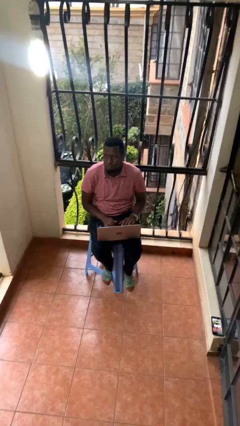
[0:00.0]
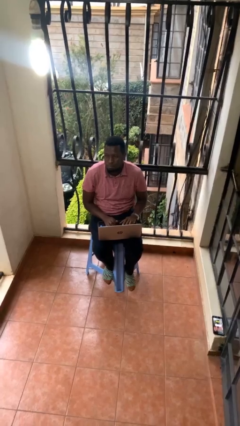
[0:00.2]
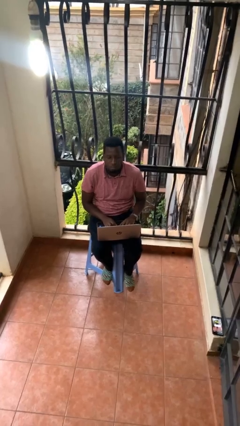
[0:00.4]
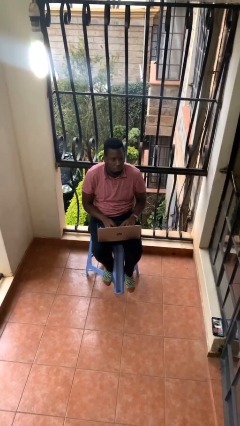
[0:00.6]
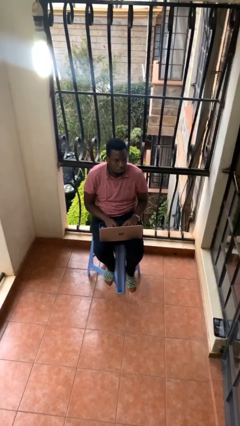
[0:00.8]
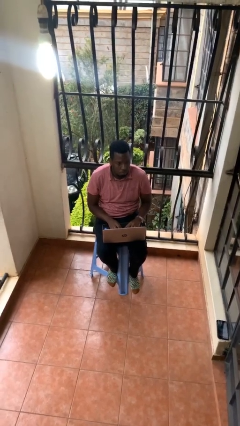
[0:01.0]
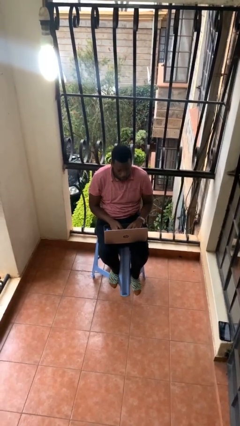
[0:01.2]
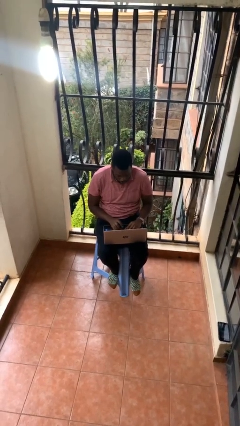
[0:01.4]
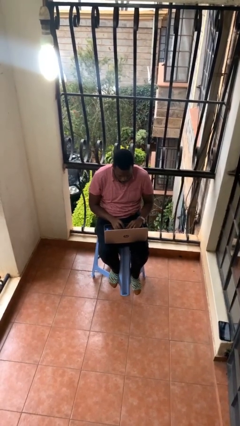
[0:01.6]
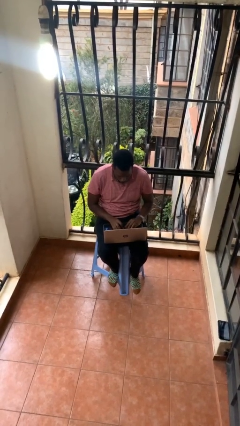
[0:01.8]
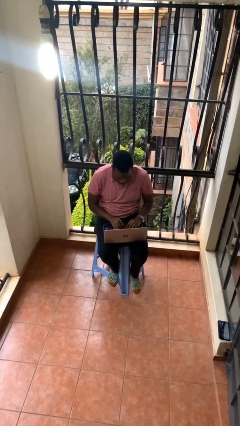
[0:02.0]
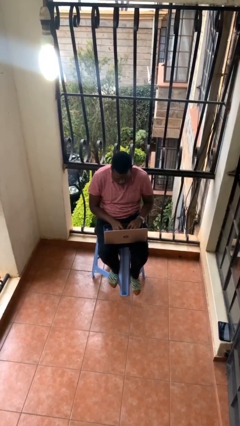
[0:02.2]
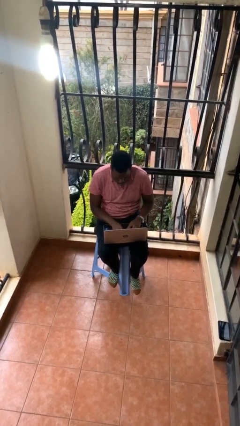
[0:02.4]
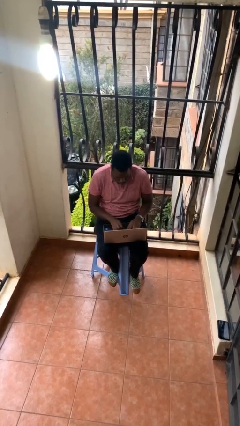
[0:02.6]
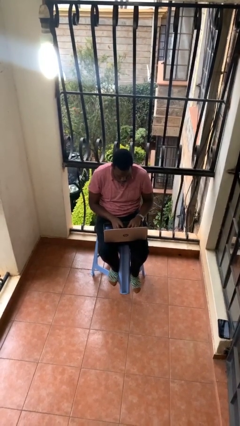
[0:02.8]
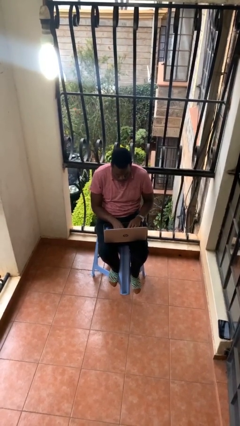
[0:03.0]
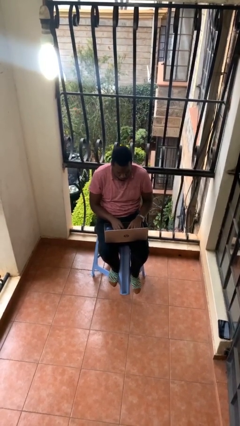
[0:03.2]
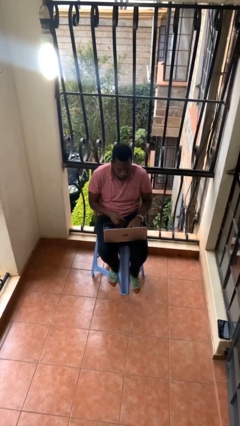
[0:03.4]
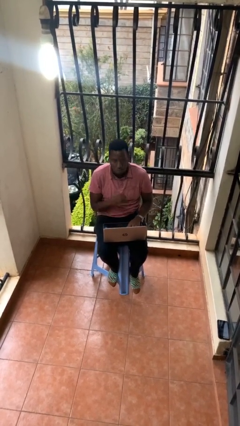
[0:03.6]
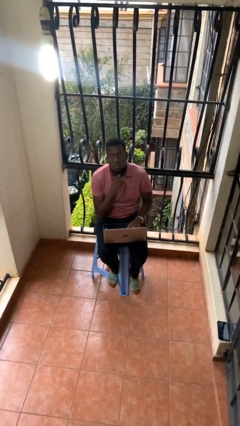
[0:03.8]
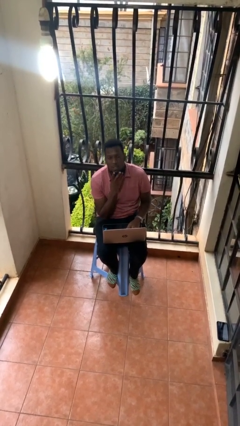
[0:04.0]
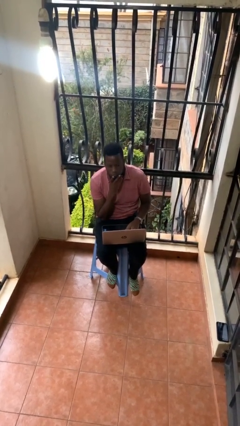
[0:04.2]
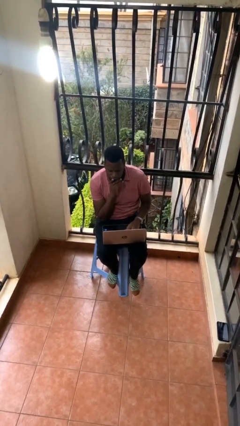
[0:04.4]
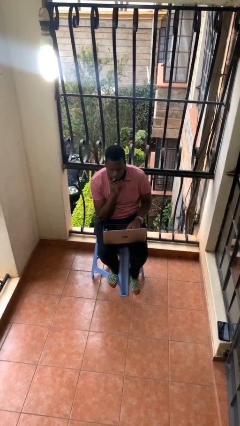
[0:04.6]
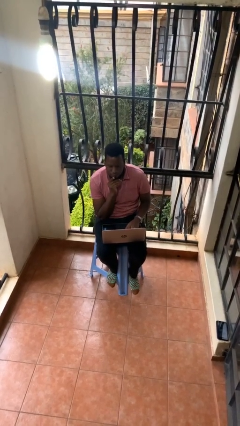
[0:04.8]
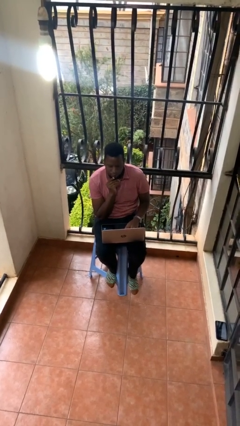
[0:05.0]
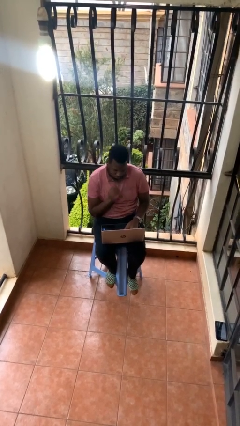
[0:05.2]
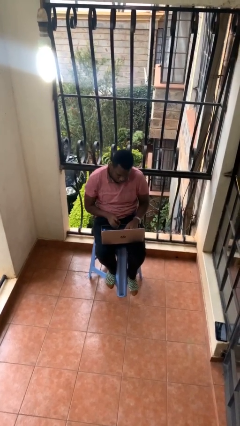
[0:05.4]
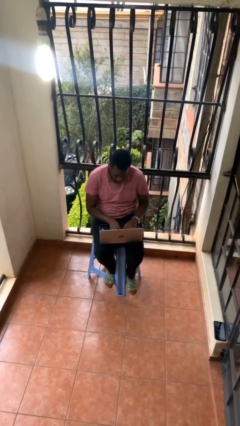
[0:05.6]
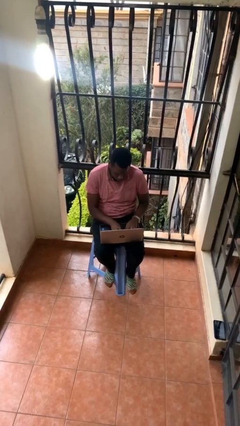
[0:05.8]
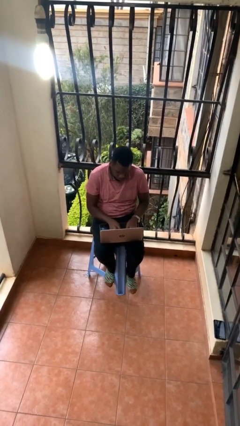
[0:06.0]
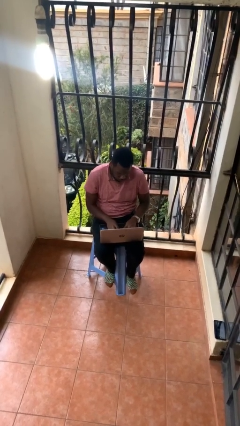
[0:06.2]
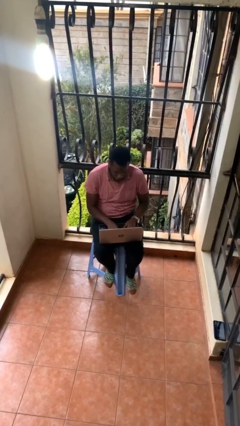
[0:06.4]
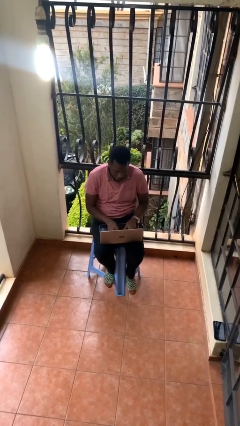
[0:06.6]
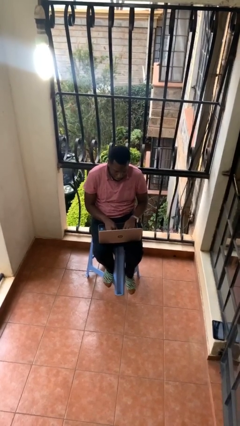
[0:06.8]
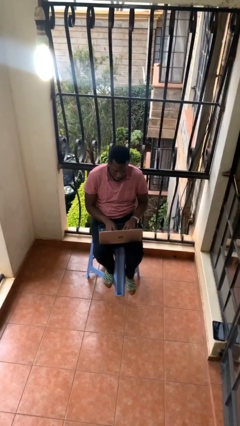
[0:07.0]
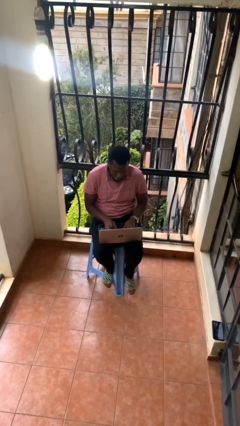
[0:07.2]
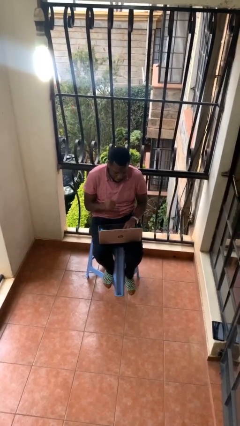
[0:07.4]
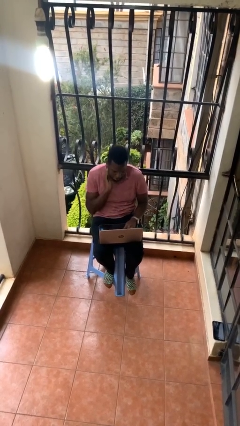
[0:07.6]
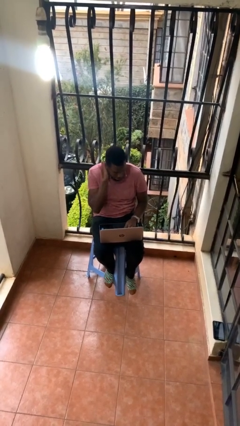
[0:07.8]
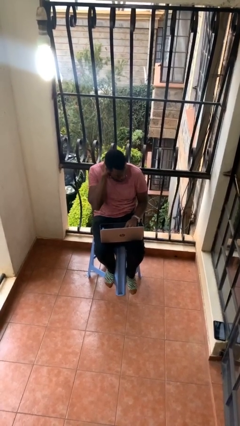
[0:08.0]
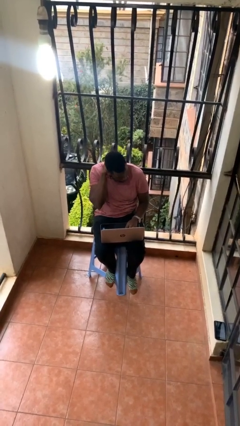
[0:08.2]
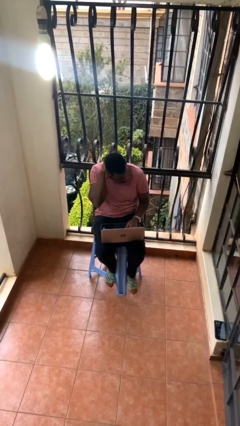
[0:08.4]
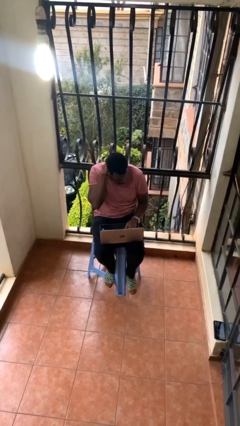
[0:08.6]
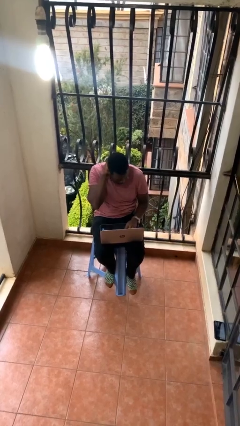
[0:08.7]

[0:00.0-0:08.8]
person interacts with laptop

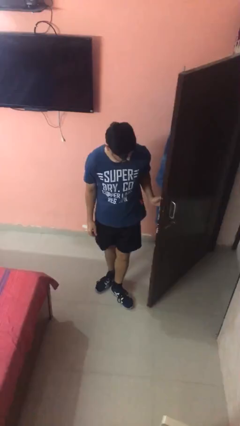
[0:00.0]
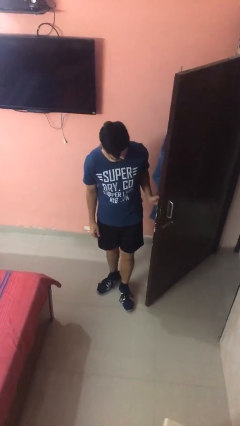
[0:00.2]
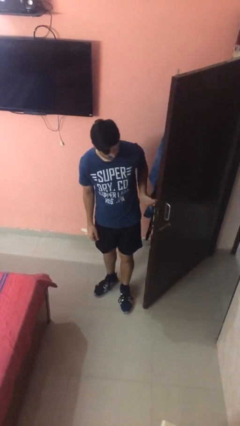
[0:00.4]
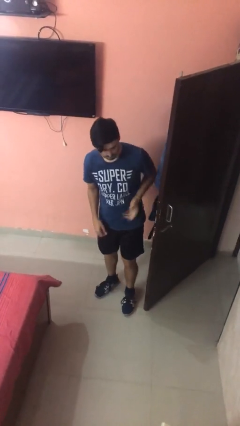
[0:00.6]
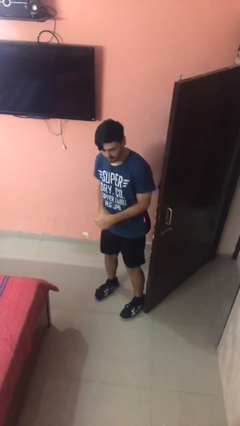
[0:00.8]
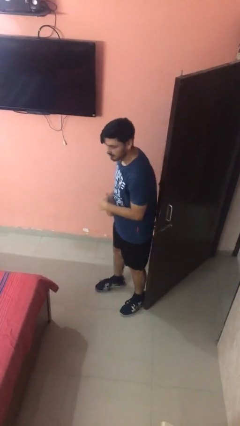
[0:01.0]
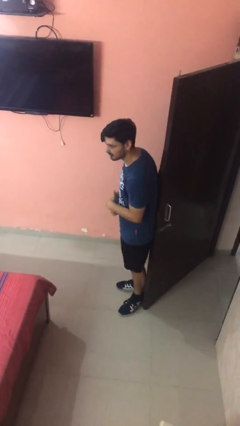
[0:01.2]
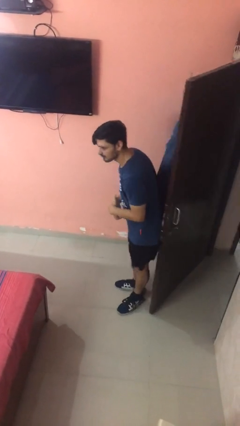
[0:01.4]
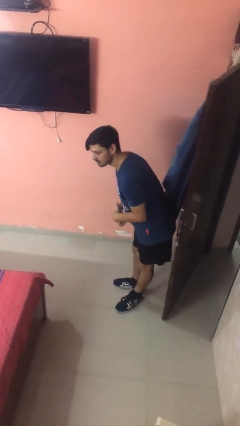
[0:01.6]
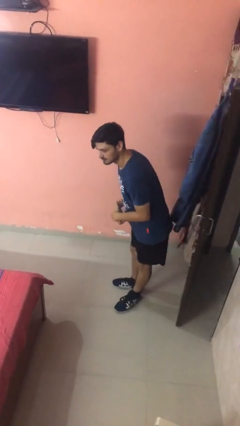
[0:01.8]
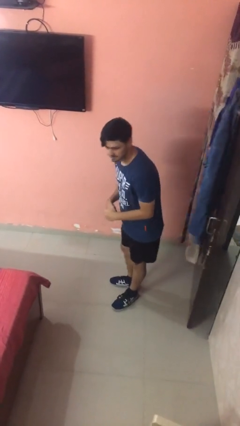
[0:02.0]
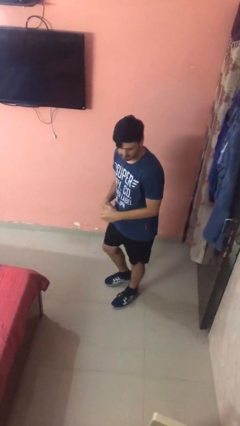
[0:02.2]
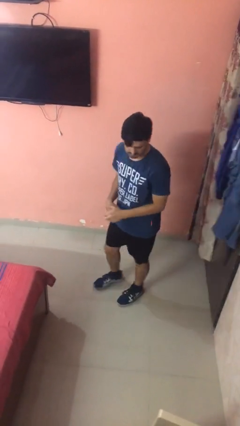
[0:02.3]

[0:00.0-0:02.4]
person closes door with hip

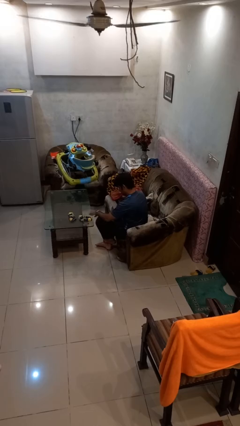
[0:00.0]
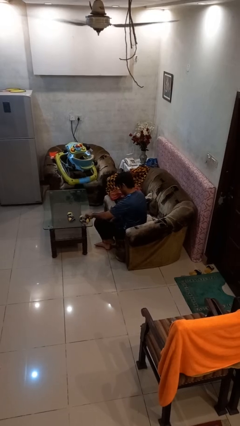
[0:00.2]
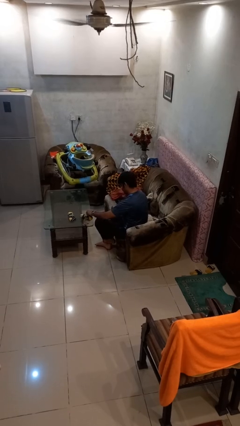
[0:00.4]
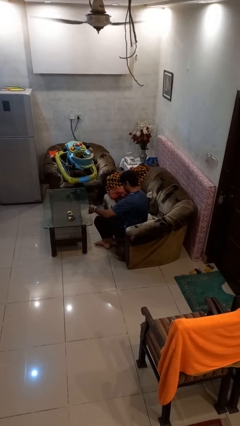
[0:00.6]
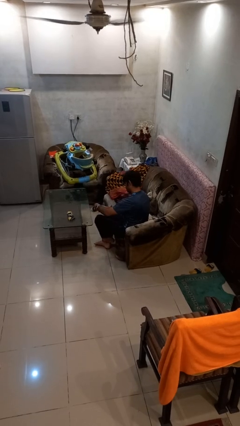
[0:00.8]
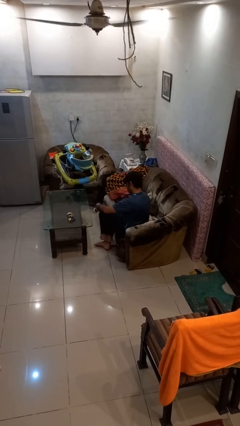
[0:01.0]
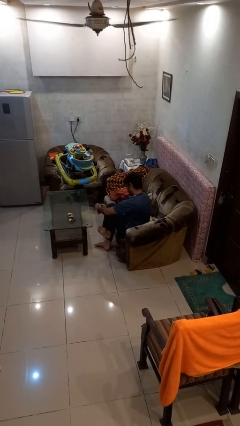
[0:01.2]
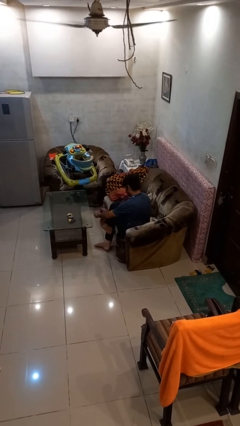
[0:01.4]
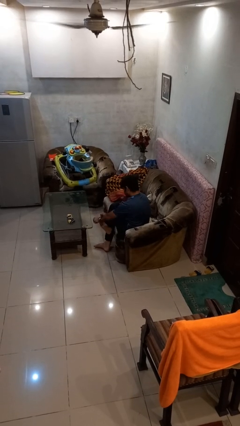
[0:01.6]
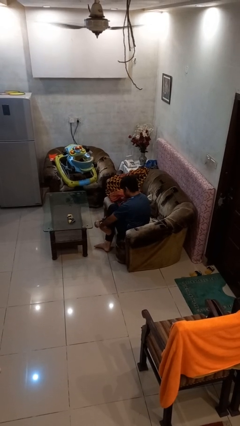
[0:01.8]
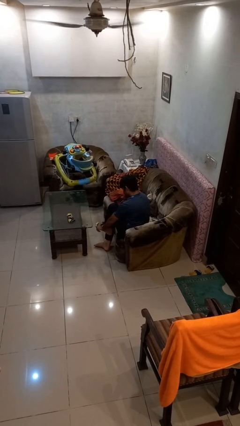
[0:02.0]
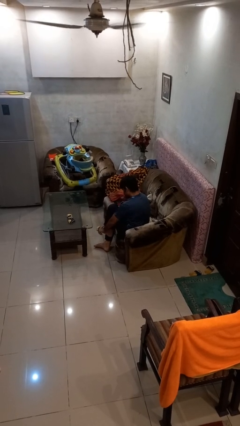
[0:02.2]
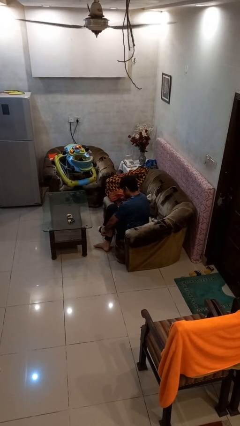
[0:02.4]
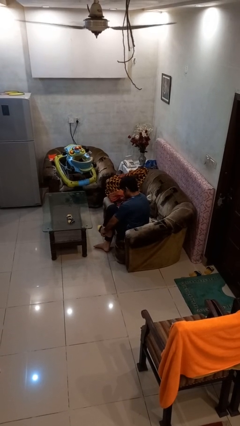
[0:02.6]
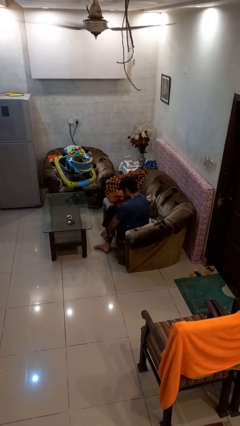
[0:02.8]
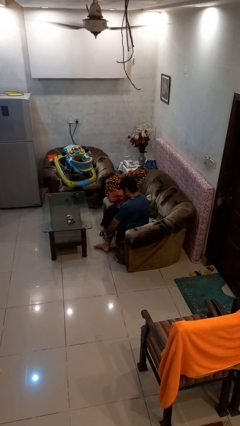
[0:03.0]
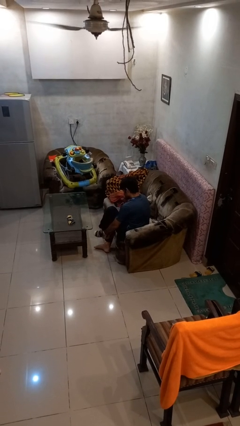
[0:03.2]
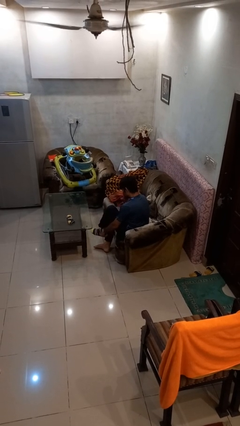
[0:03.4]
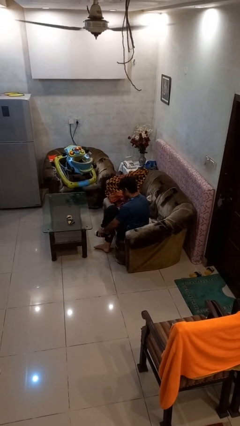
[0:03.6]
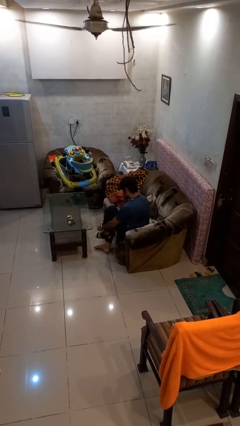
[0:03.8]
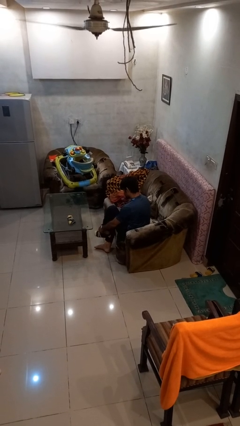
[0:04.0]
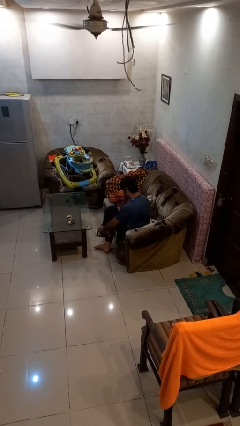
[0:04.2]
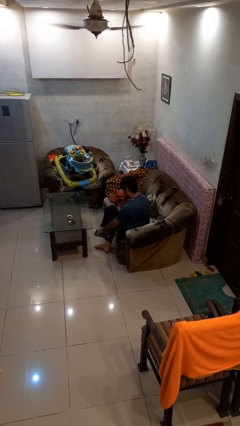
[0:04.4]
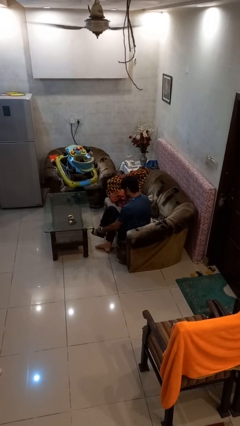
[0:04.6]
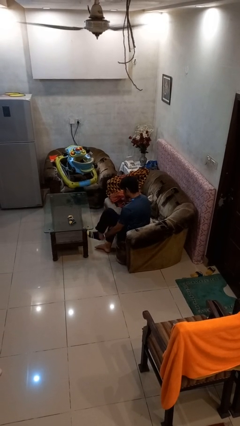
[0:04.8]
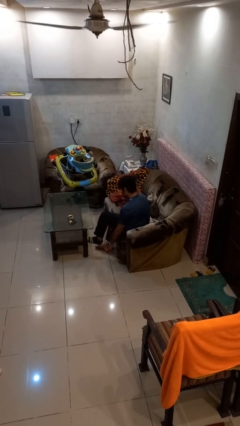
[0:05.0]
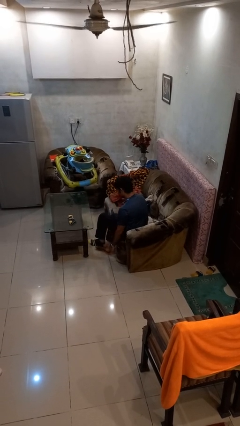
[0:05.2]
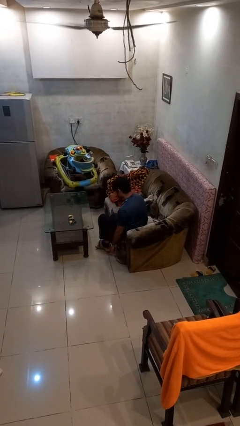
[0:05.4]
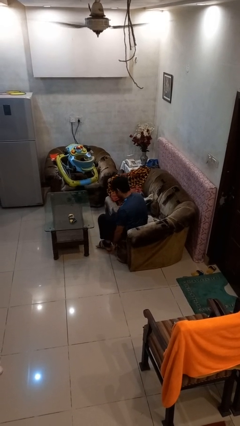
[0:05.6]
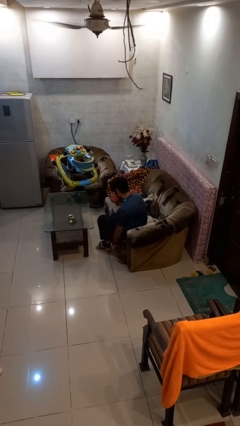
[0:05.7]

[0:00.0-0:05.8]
person puts on socks

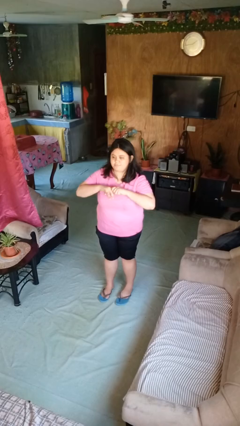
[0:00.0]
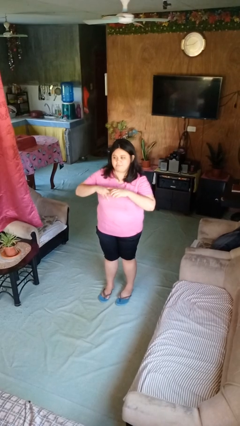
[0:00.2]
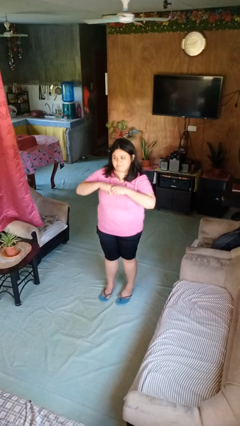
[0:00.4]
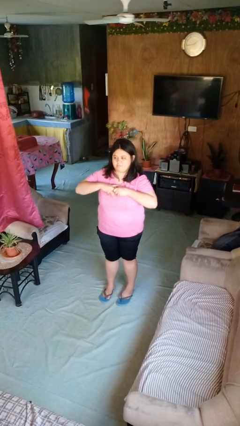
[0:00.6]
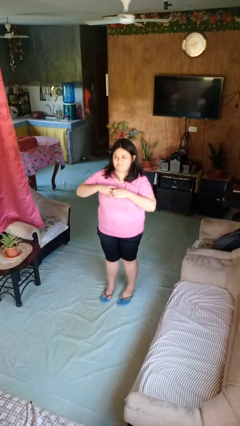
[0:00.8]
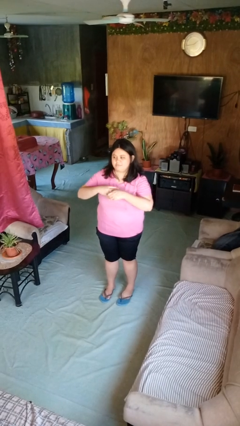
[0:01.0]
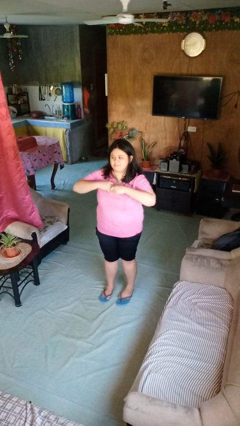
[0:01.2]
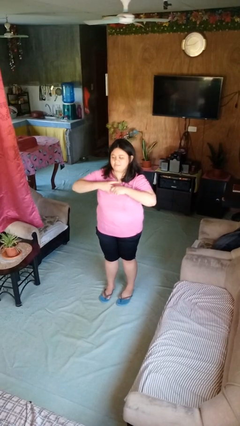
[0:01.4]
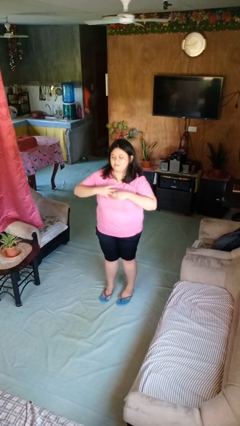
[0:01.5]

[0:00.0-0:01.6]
person cracks knuckles
